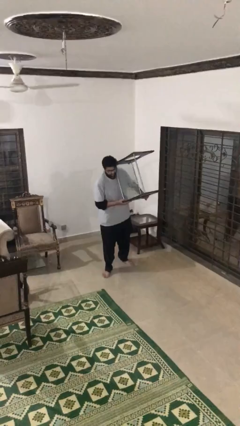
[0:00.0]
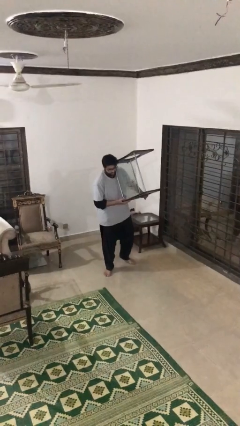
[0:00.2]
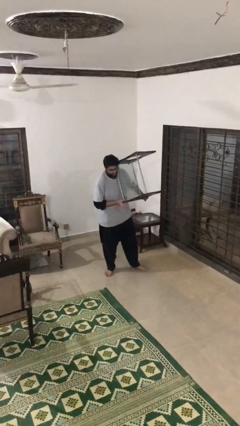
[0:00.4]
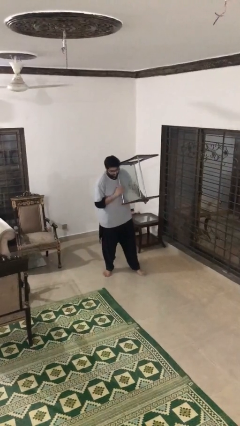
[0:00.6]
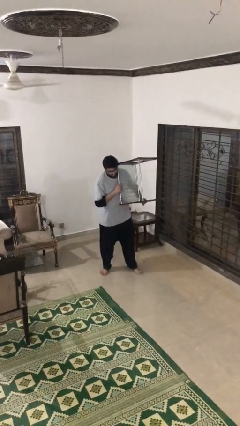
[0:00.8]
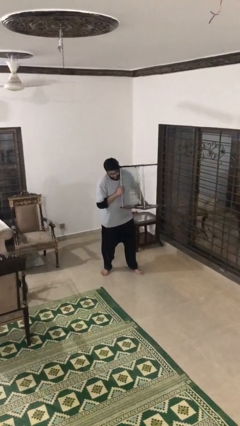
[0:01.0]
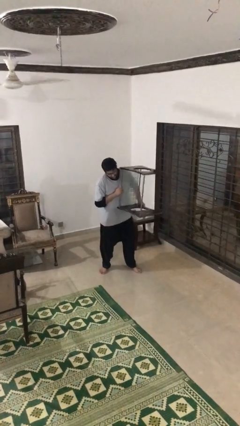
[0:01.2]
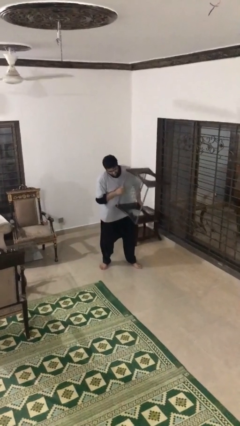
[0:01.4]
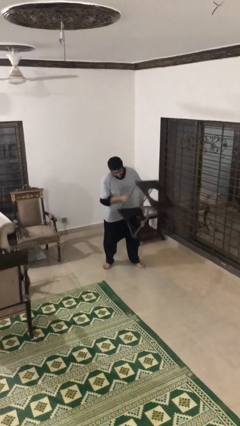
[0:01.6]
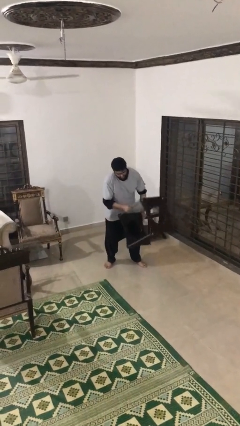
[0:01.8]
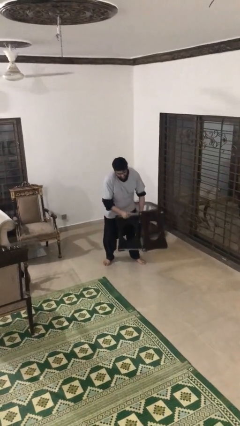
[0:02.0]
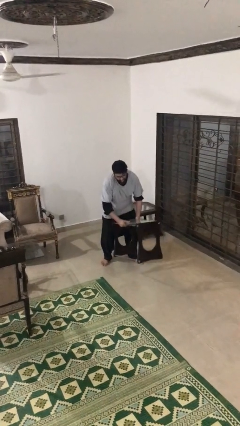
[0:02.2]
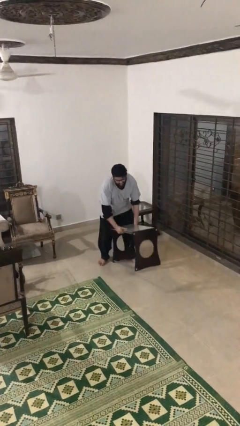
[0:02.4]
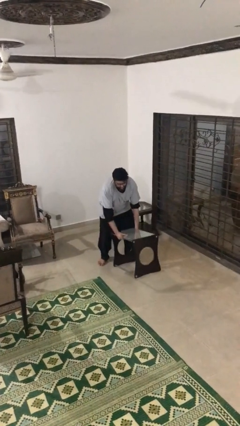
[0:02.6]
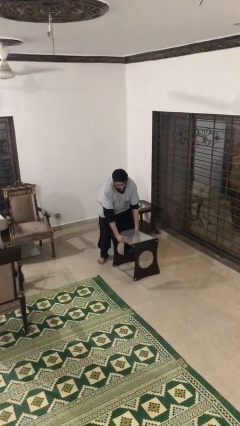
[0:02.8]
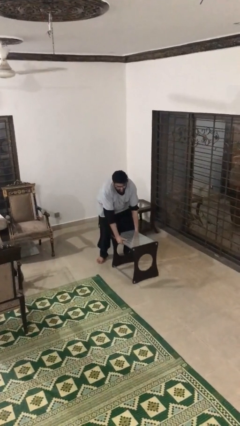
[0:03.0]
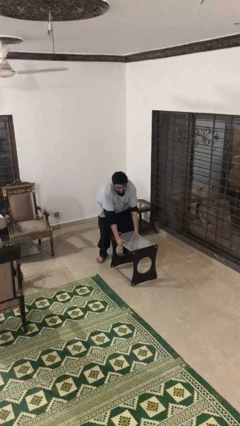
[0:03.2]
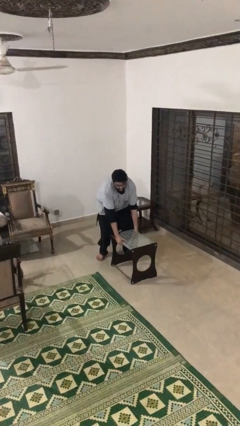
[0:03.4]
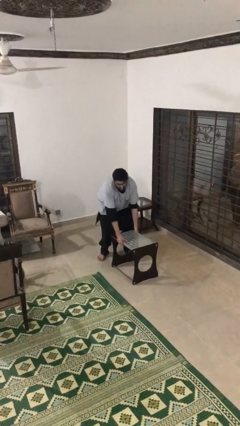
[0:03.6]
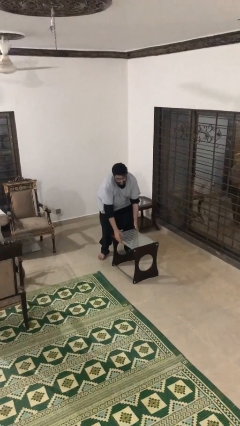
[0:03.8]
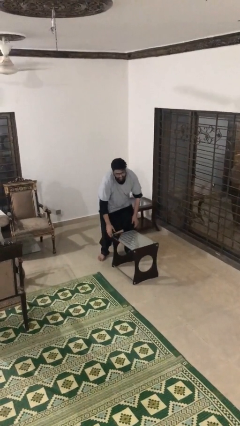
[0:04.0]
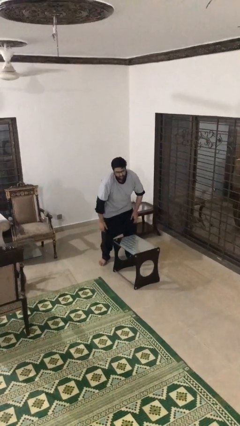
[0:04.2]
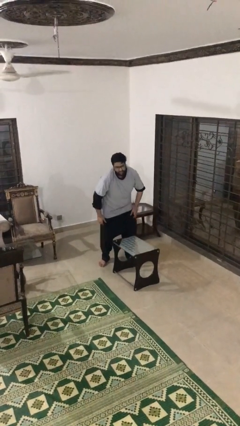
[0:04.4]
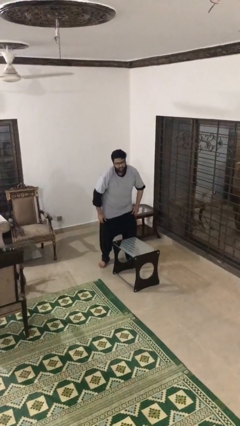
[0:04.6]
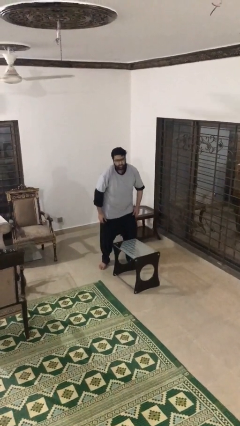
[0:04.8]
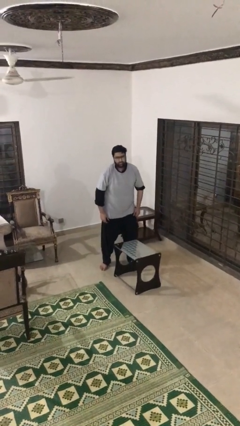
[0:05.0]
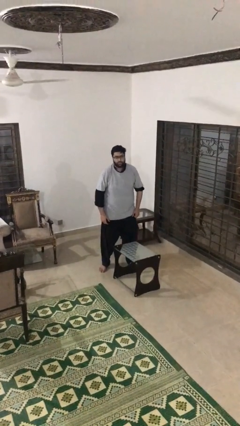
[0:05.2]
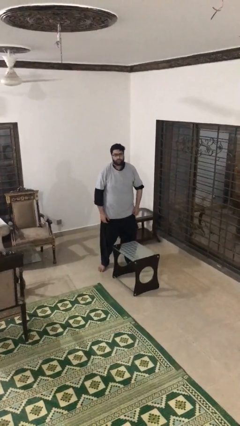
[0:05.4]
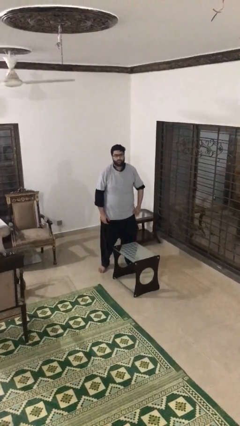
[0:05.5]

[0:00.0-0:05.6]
person puts down object on floor

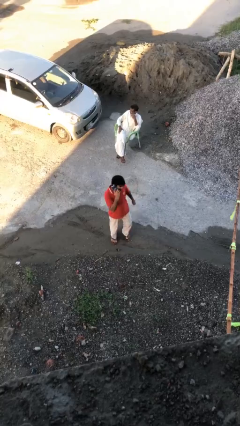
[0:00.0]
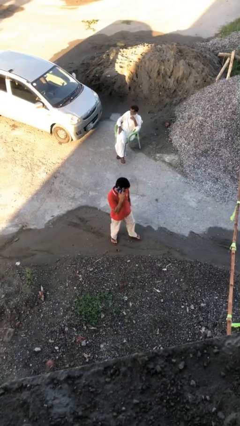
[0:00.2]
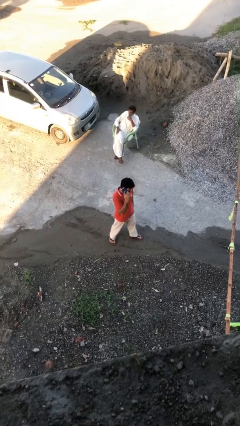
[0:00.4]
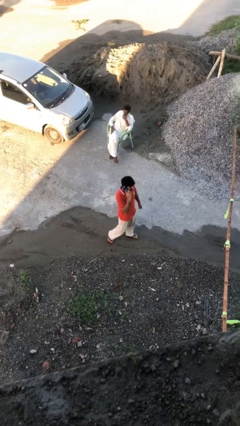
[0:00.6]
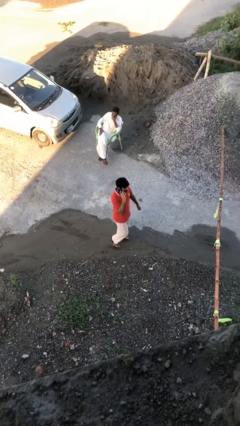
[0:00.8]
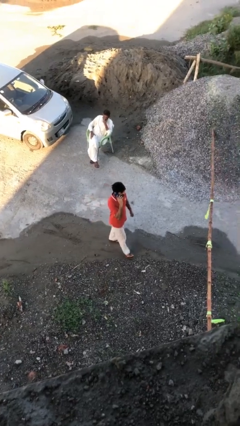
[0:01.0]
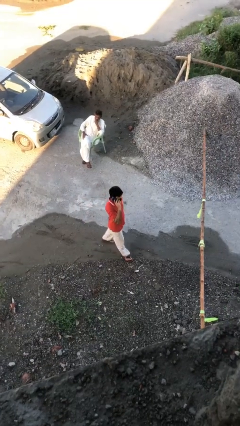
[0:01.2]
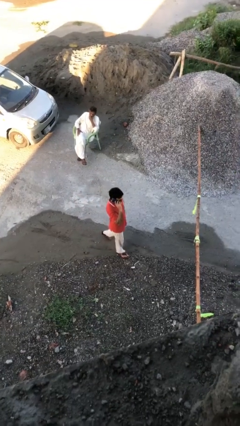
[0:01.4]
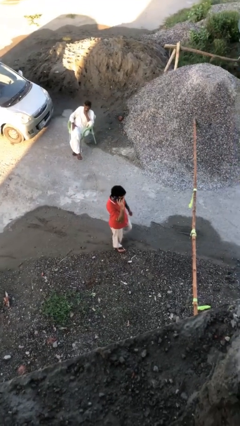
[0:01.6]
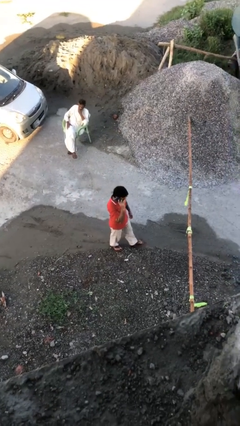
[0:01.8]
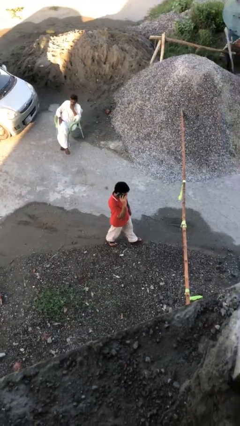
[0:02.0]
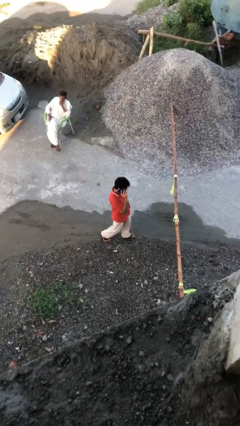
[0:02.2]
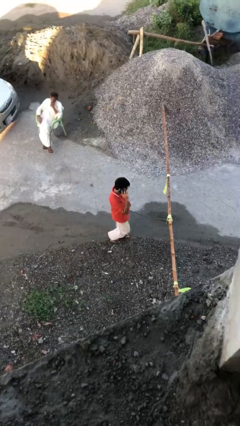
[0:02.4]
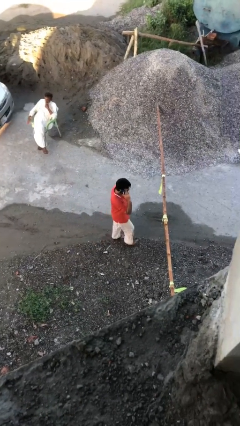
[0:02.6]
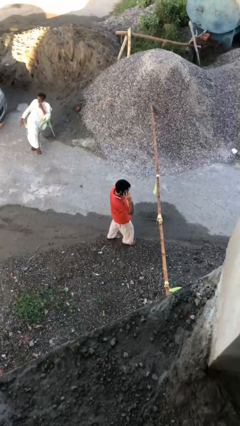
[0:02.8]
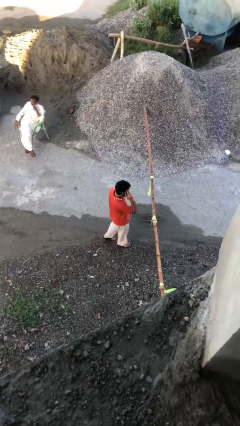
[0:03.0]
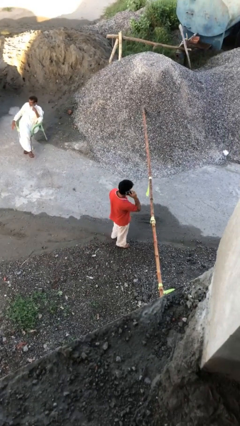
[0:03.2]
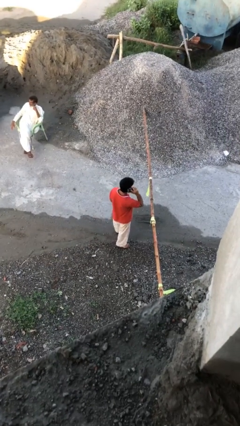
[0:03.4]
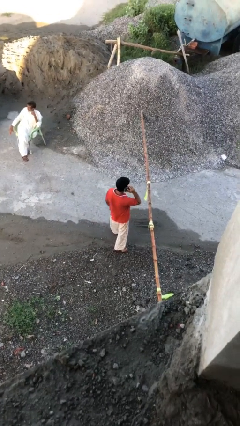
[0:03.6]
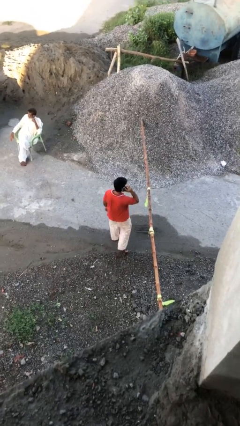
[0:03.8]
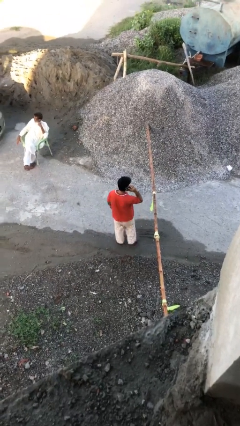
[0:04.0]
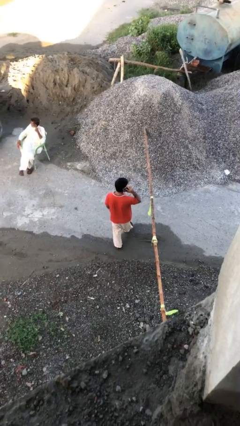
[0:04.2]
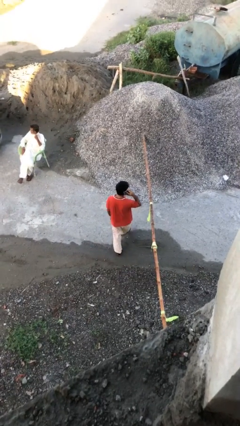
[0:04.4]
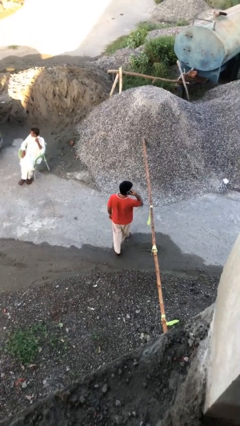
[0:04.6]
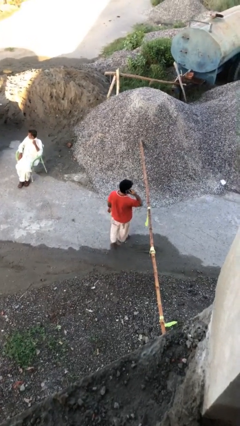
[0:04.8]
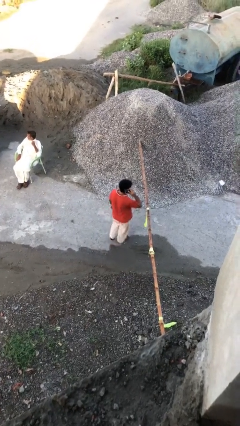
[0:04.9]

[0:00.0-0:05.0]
person talks on phone

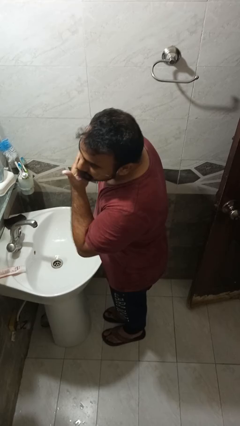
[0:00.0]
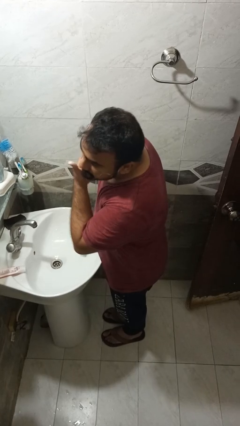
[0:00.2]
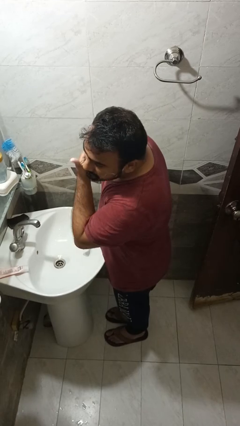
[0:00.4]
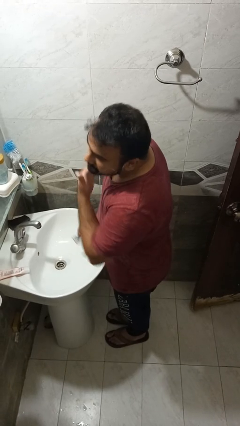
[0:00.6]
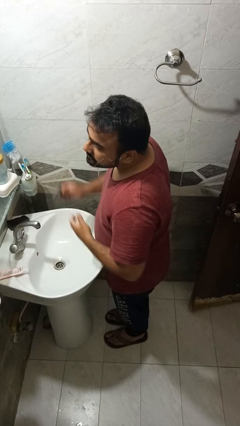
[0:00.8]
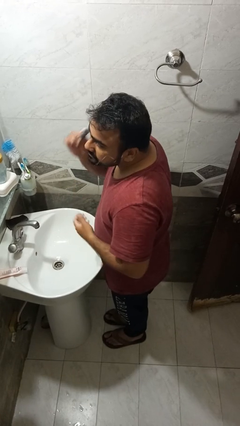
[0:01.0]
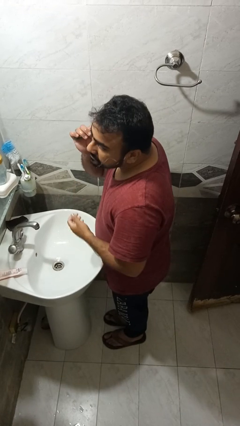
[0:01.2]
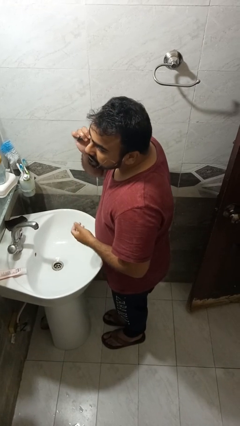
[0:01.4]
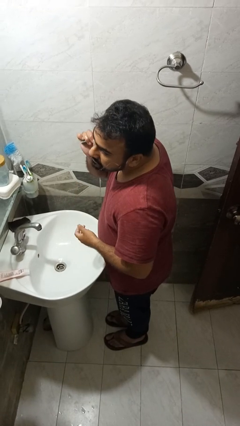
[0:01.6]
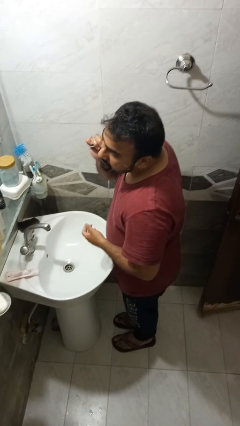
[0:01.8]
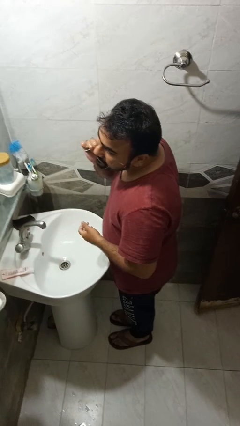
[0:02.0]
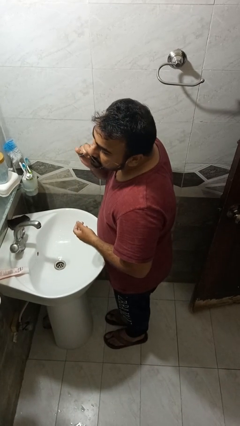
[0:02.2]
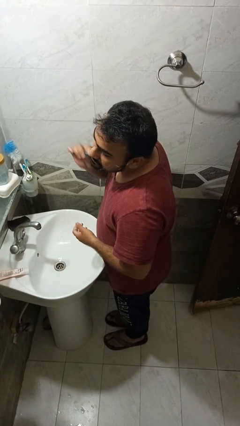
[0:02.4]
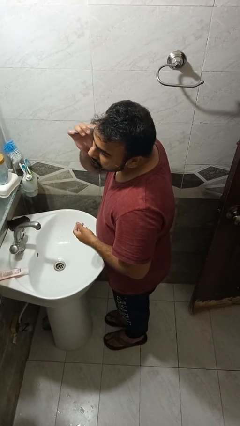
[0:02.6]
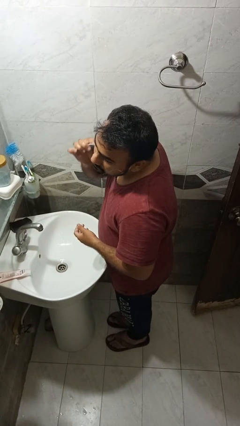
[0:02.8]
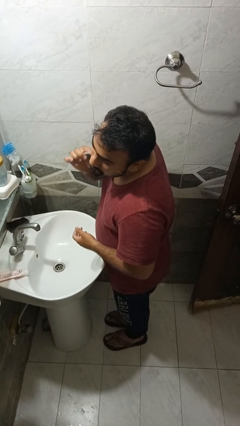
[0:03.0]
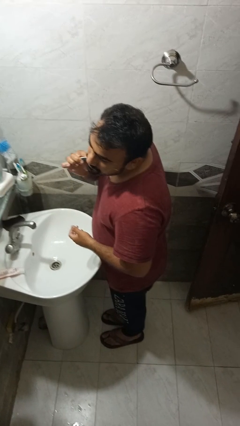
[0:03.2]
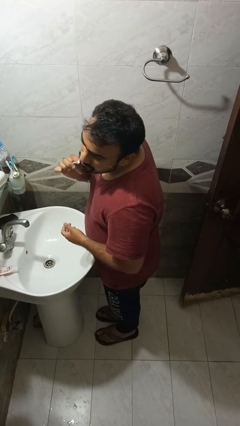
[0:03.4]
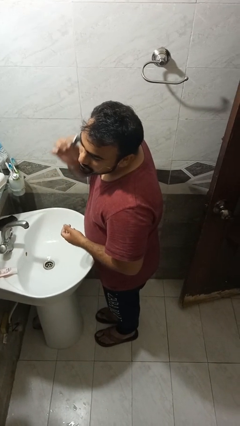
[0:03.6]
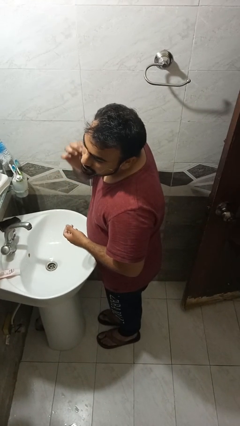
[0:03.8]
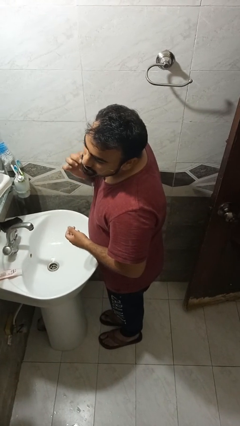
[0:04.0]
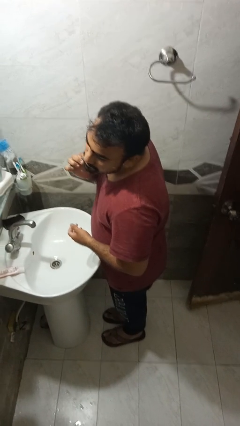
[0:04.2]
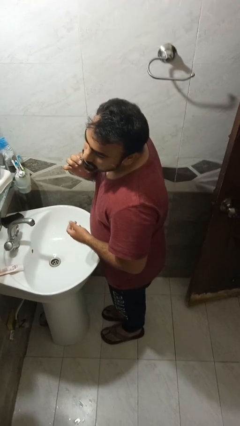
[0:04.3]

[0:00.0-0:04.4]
person shaves face

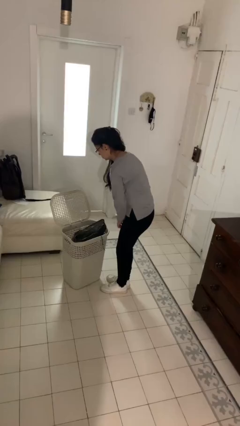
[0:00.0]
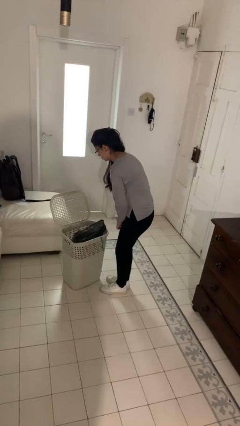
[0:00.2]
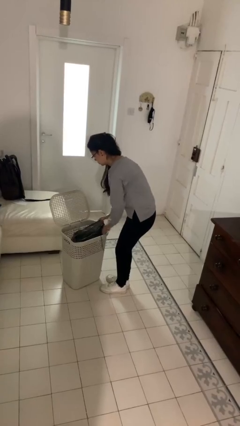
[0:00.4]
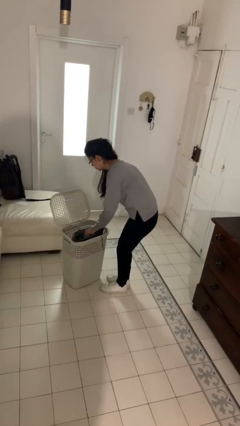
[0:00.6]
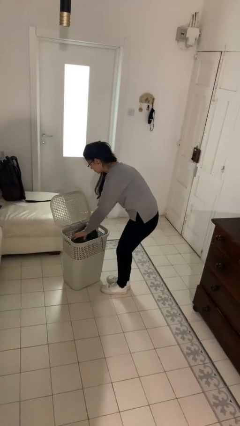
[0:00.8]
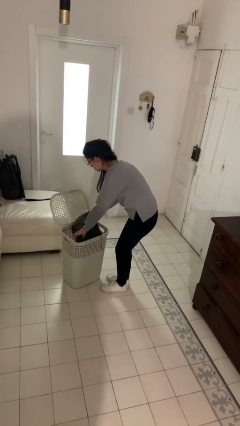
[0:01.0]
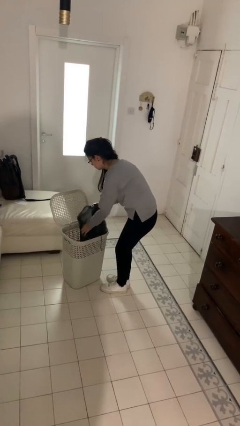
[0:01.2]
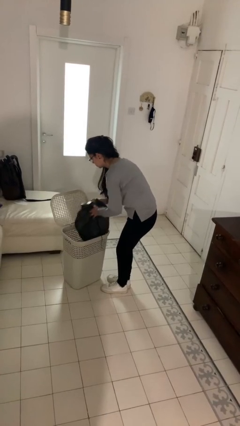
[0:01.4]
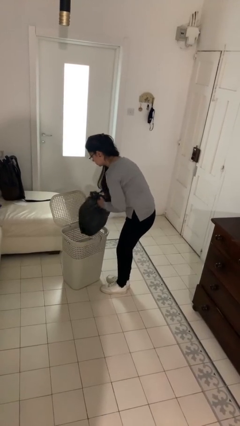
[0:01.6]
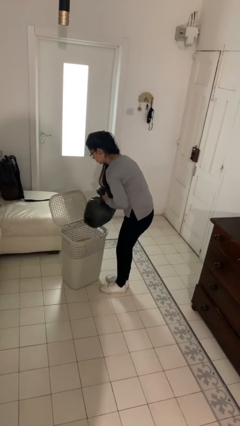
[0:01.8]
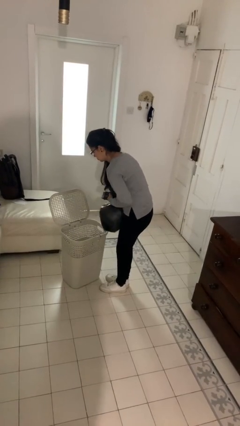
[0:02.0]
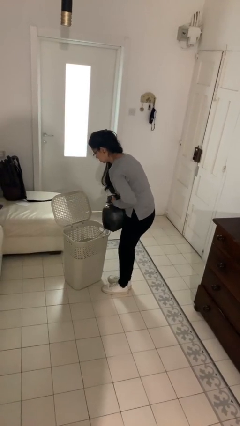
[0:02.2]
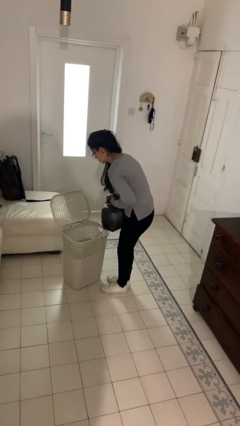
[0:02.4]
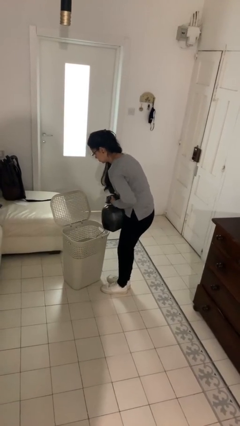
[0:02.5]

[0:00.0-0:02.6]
person removes trashbag from trashcan
